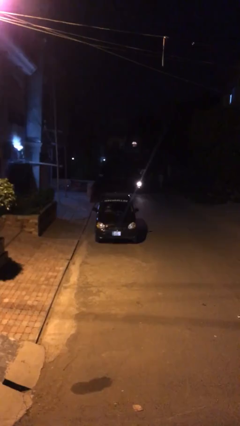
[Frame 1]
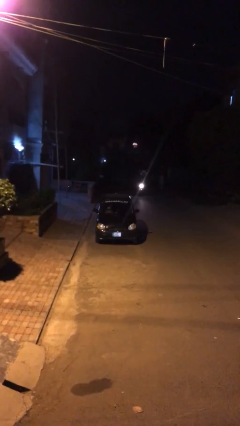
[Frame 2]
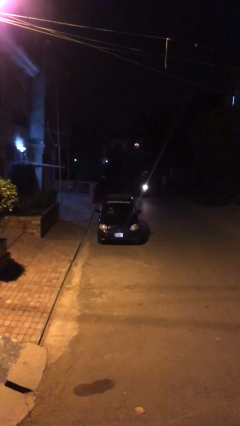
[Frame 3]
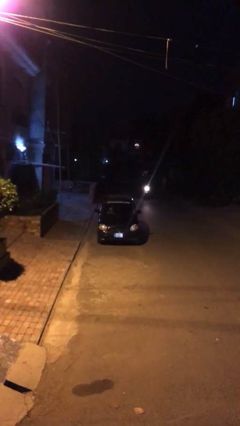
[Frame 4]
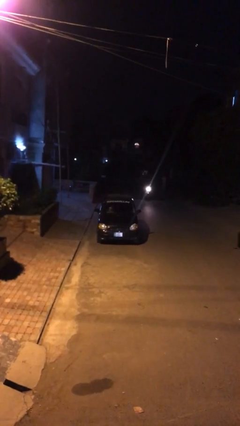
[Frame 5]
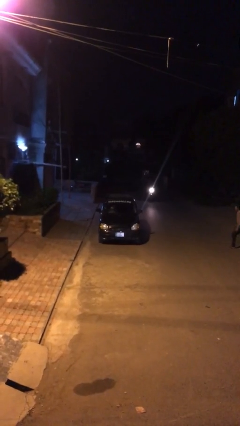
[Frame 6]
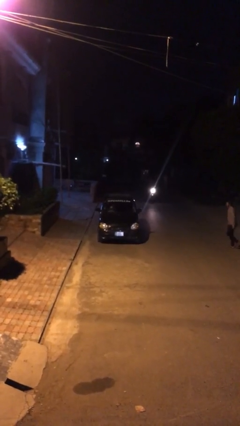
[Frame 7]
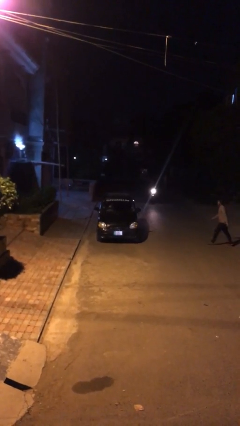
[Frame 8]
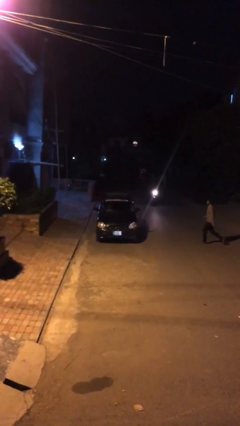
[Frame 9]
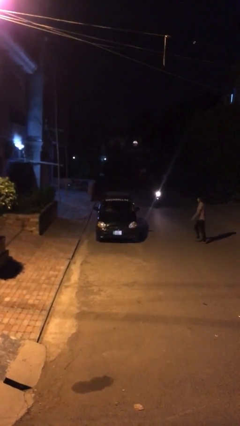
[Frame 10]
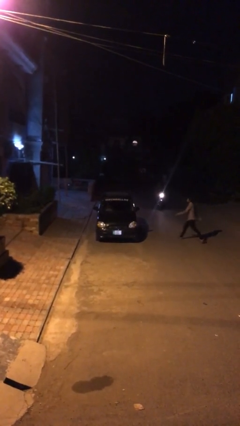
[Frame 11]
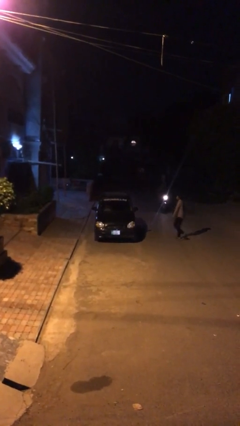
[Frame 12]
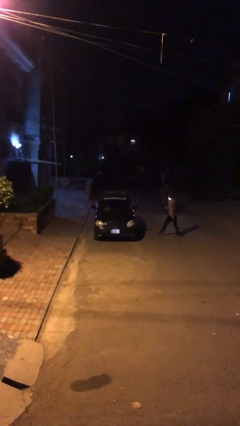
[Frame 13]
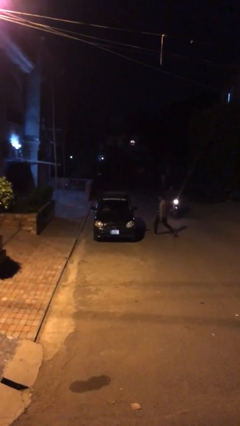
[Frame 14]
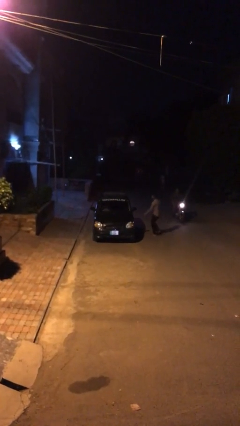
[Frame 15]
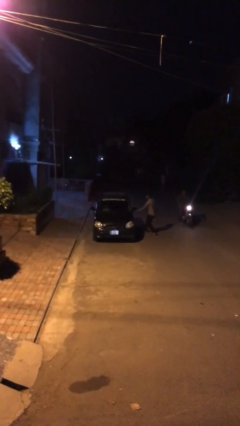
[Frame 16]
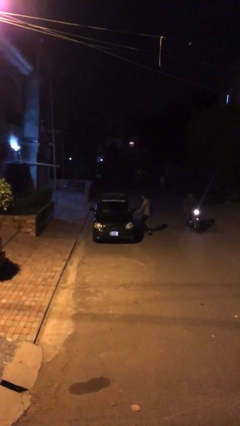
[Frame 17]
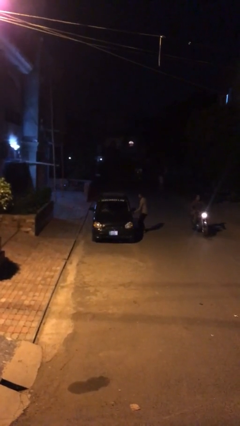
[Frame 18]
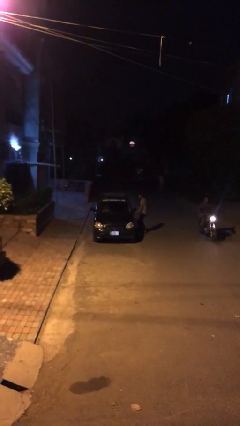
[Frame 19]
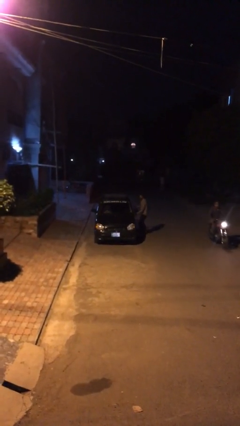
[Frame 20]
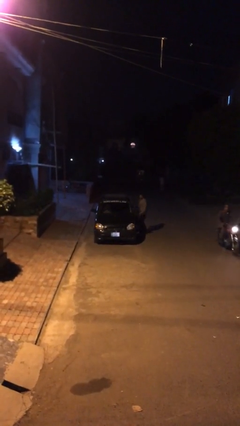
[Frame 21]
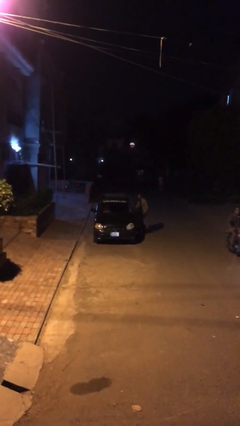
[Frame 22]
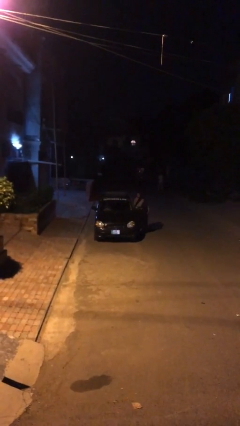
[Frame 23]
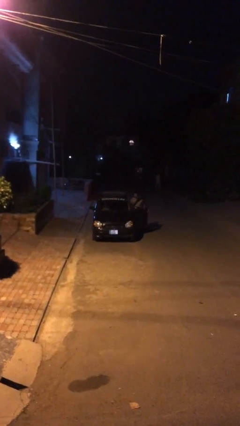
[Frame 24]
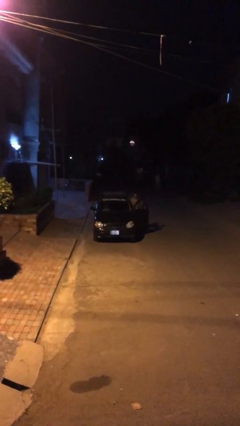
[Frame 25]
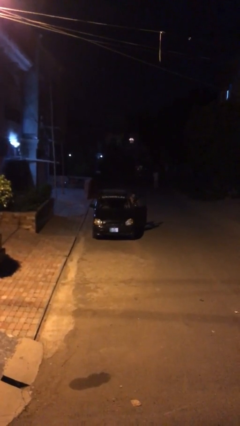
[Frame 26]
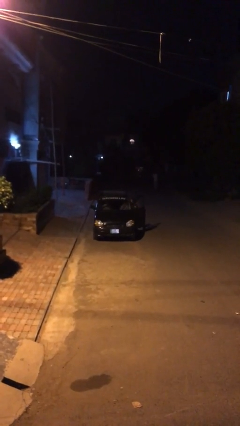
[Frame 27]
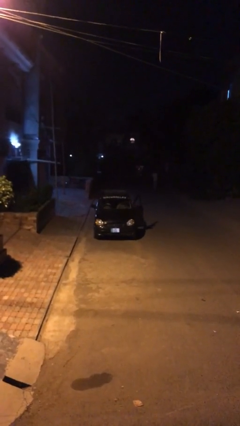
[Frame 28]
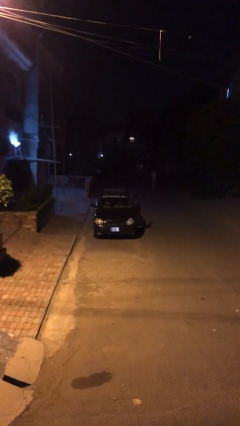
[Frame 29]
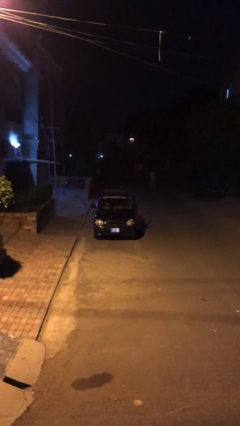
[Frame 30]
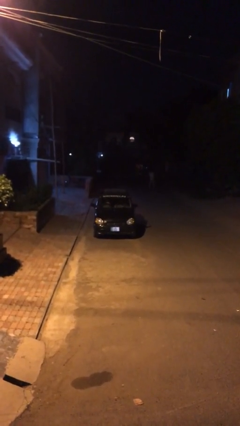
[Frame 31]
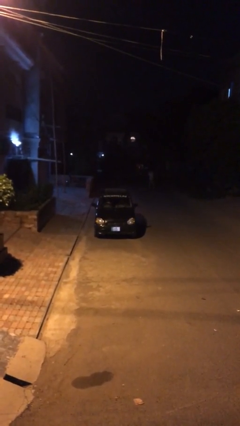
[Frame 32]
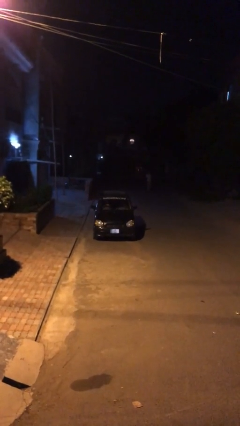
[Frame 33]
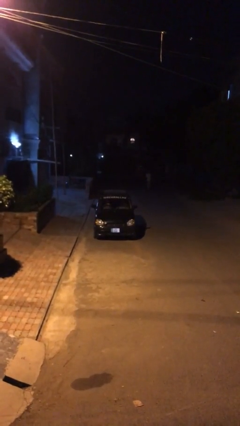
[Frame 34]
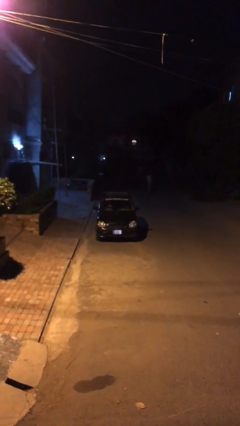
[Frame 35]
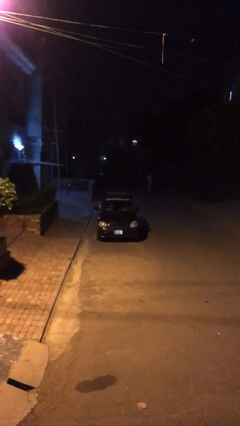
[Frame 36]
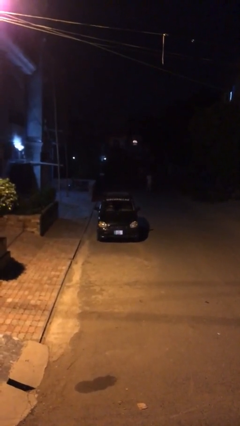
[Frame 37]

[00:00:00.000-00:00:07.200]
car picks up person

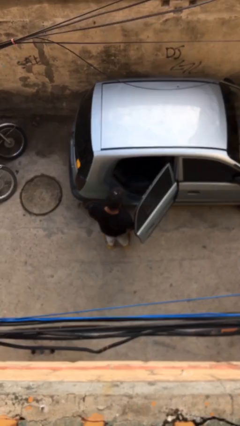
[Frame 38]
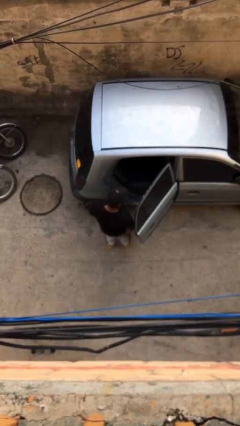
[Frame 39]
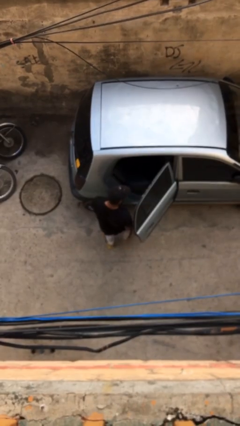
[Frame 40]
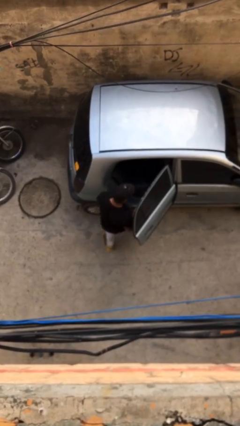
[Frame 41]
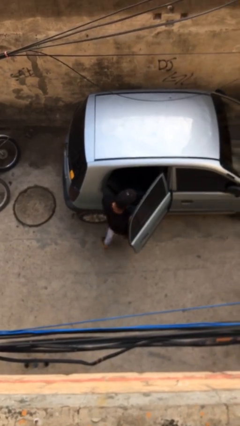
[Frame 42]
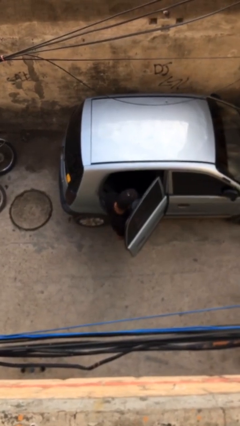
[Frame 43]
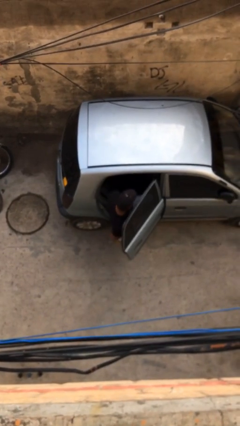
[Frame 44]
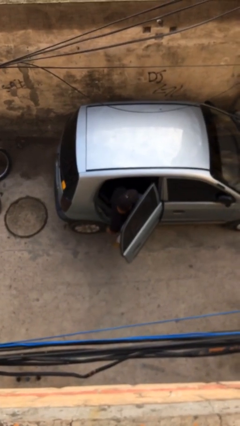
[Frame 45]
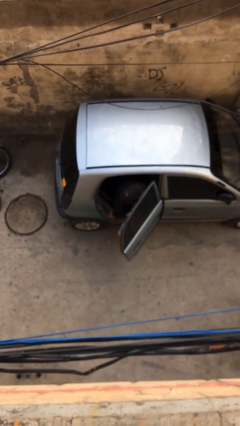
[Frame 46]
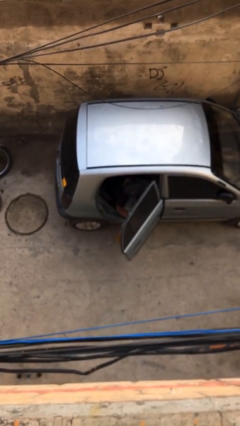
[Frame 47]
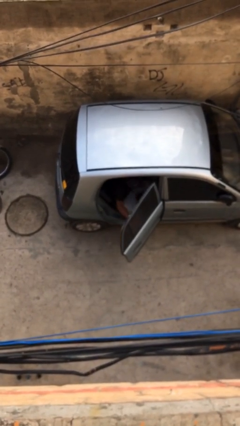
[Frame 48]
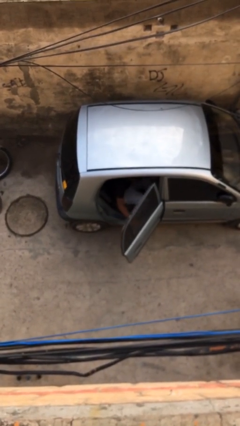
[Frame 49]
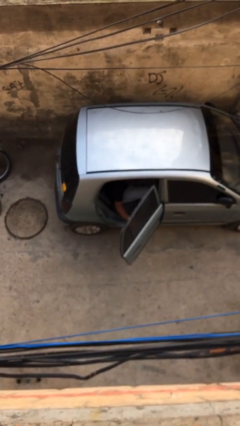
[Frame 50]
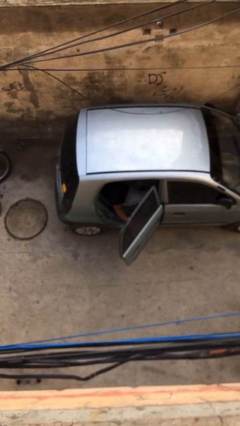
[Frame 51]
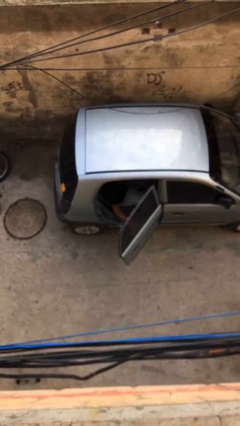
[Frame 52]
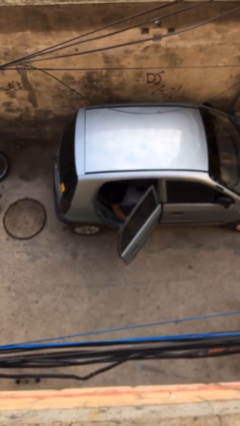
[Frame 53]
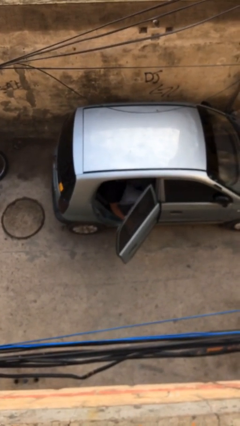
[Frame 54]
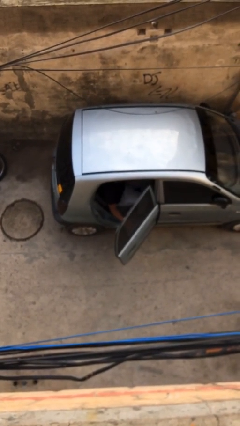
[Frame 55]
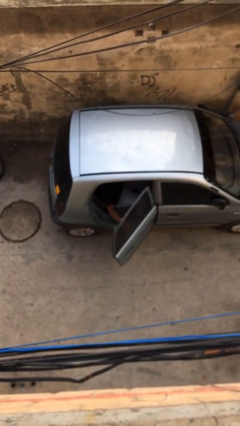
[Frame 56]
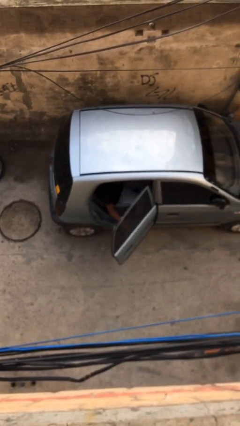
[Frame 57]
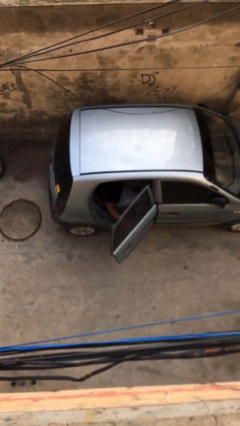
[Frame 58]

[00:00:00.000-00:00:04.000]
person enters car

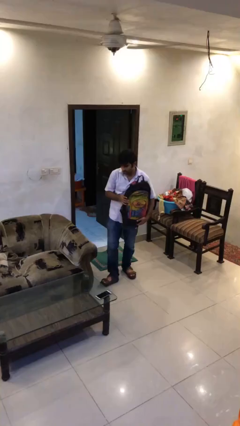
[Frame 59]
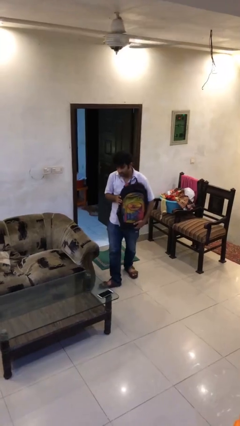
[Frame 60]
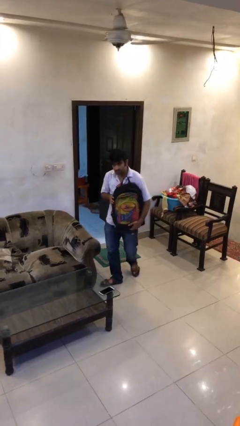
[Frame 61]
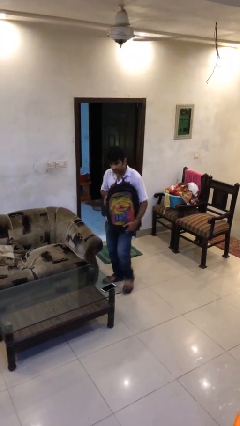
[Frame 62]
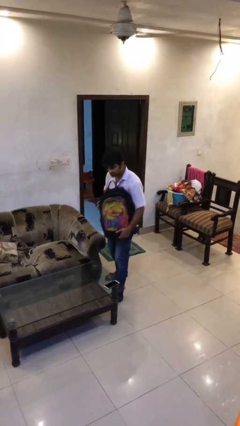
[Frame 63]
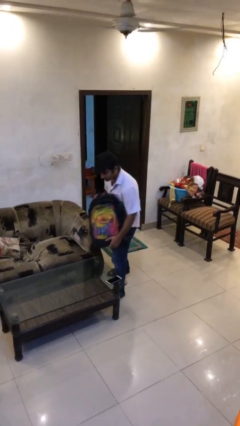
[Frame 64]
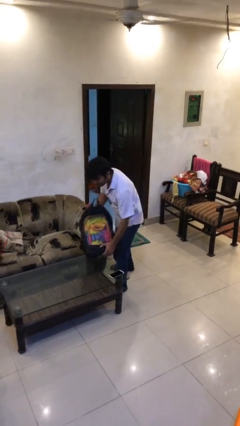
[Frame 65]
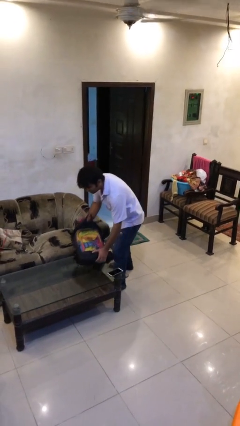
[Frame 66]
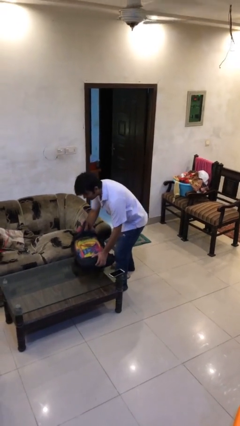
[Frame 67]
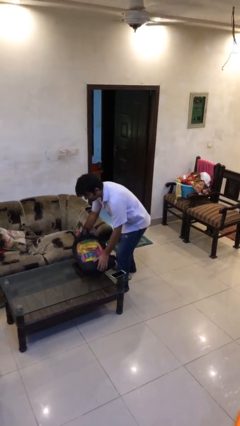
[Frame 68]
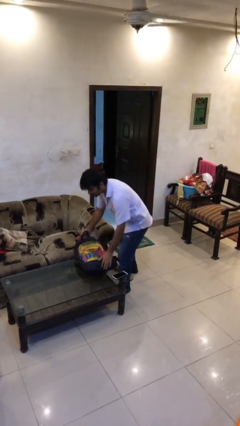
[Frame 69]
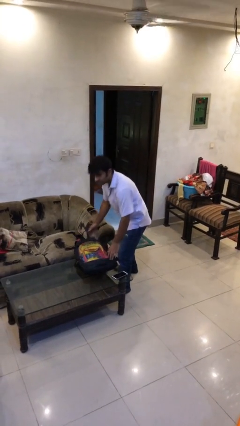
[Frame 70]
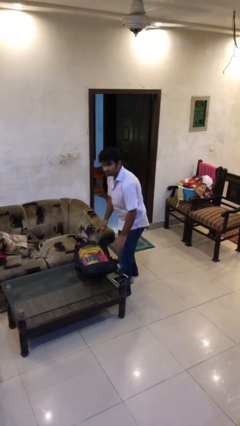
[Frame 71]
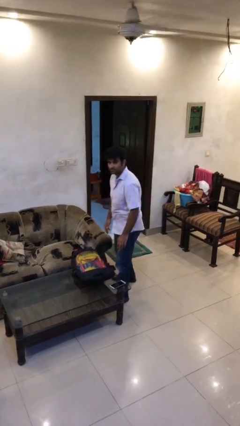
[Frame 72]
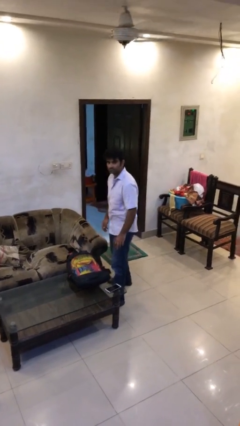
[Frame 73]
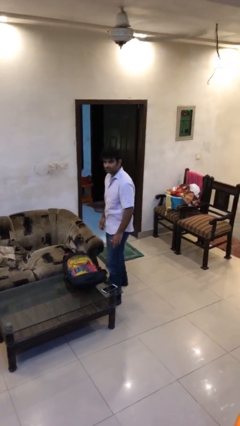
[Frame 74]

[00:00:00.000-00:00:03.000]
person puts down object on table

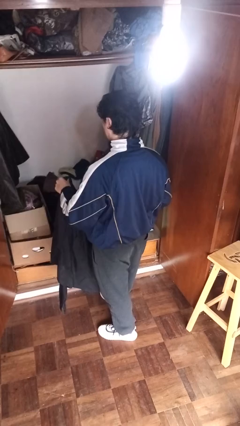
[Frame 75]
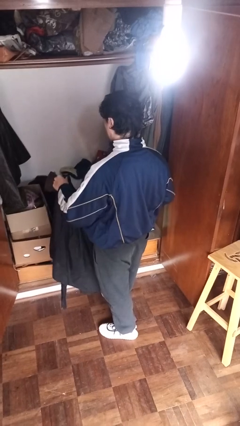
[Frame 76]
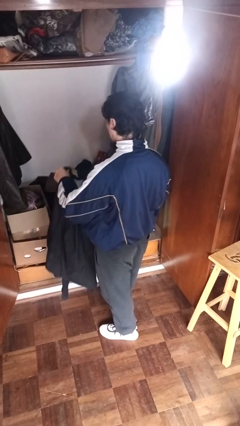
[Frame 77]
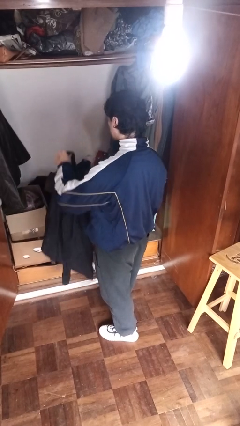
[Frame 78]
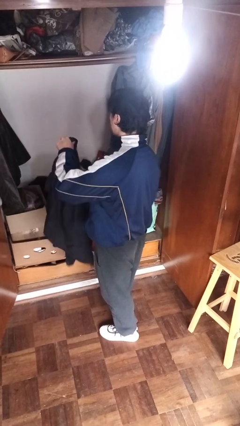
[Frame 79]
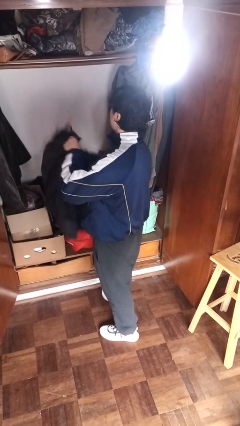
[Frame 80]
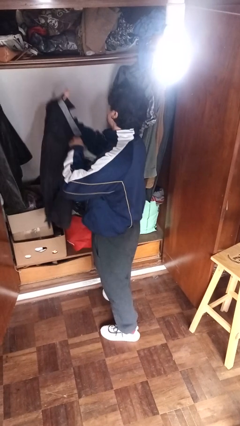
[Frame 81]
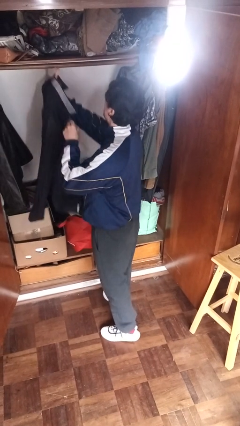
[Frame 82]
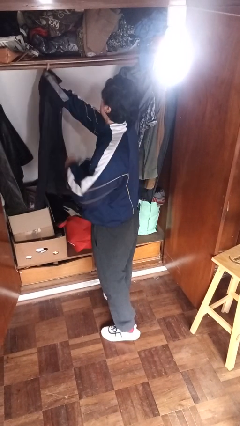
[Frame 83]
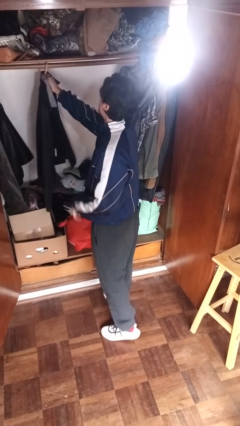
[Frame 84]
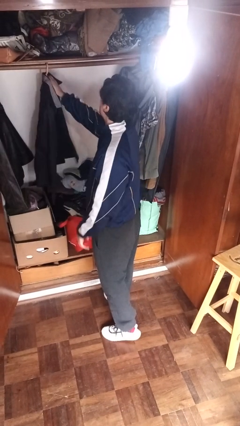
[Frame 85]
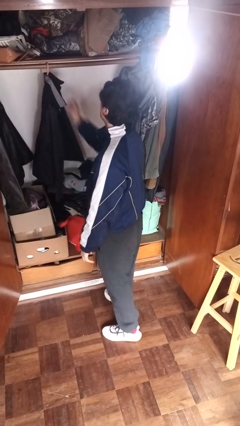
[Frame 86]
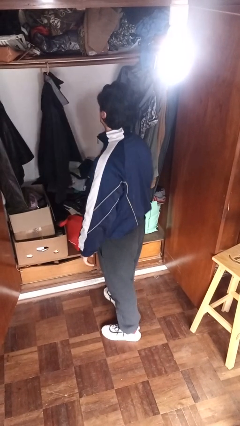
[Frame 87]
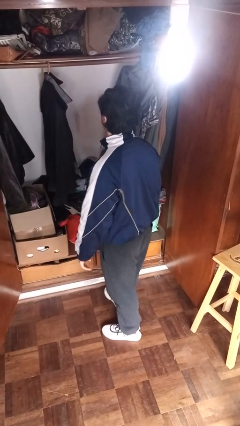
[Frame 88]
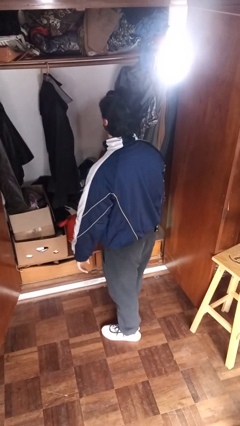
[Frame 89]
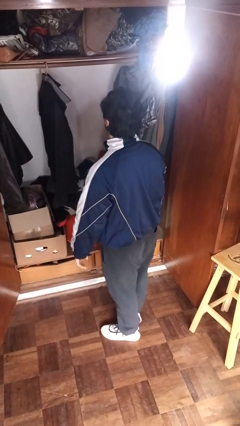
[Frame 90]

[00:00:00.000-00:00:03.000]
person puts clothes into closet
